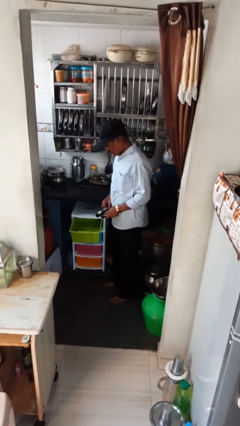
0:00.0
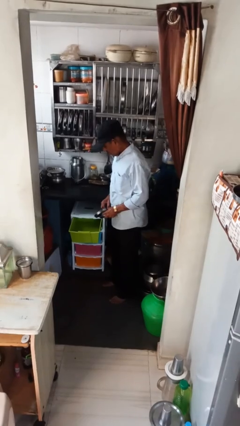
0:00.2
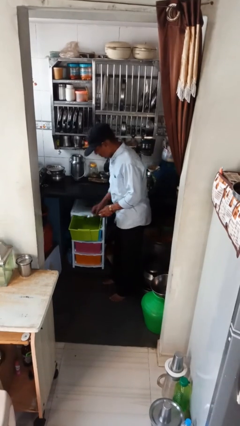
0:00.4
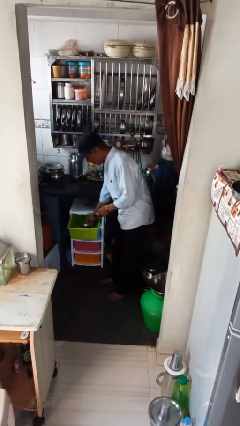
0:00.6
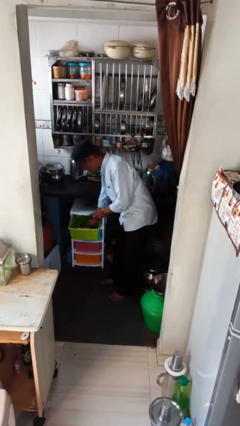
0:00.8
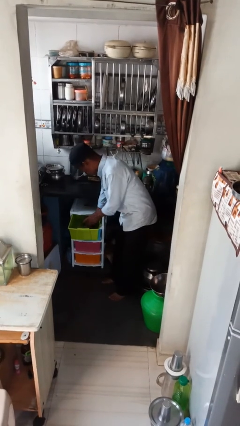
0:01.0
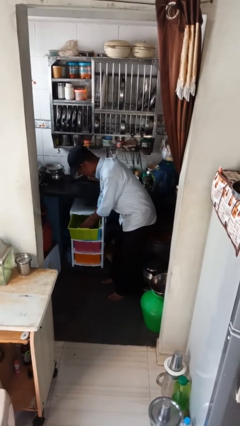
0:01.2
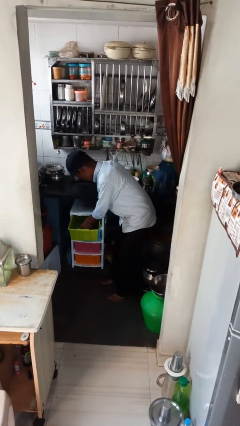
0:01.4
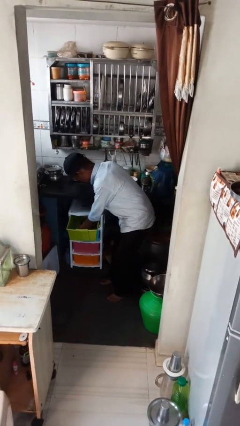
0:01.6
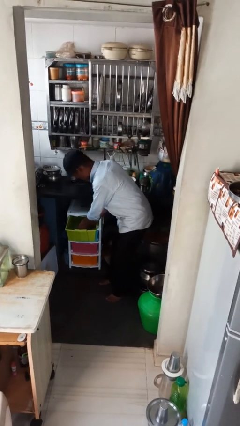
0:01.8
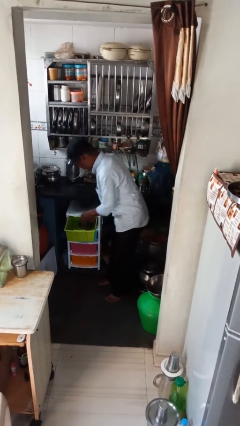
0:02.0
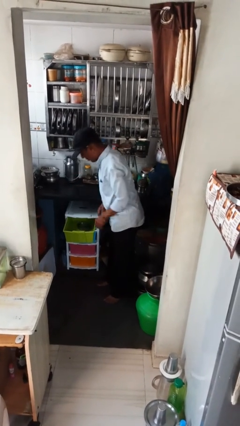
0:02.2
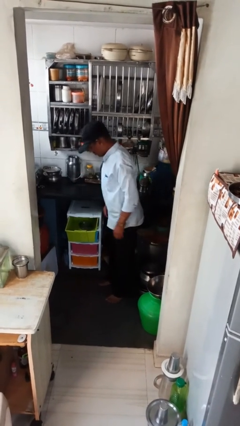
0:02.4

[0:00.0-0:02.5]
person puts object in cabinet

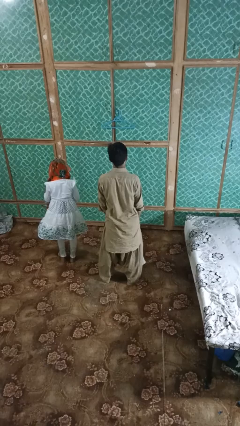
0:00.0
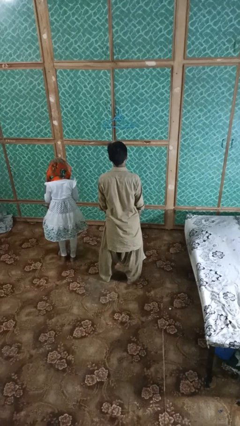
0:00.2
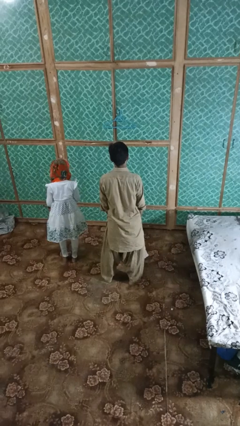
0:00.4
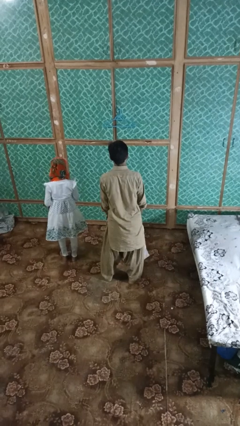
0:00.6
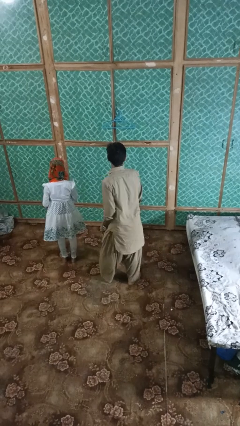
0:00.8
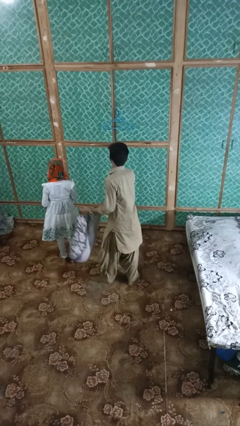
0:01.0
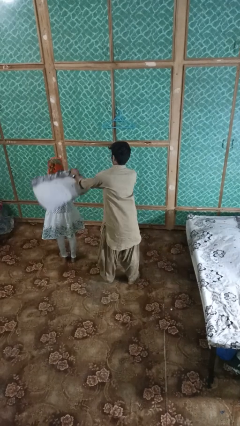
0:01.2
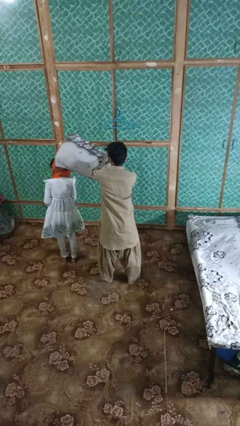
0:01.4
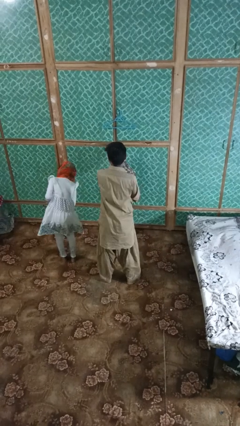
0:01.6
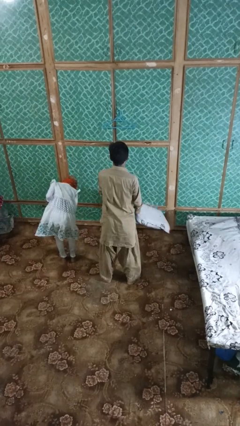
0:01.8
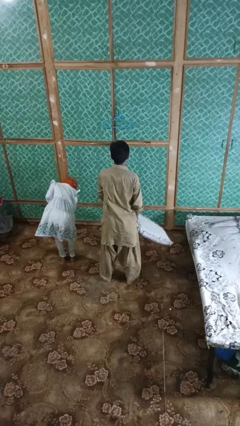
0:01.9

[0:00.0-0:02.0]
person hits person with pillow

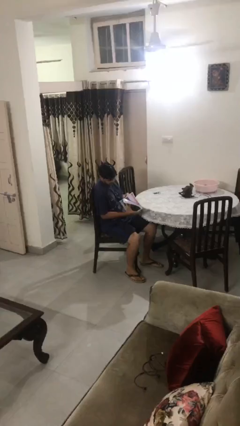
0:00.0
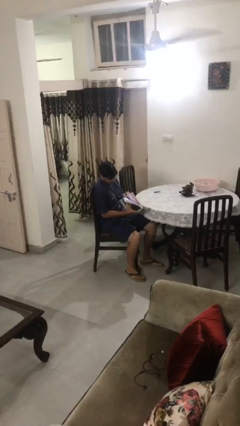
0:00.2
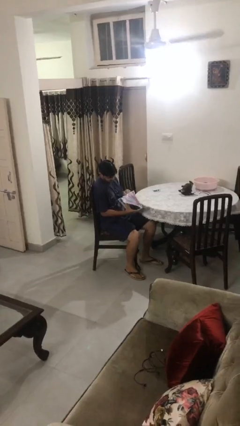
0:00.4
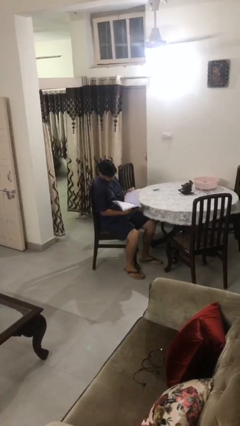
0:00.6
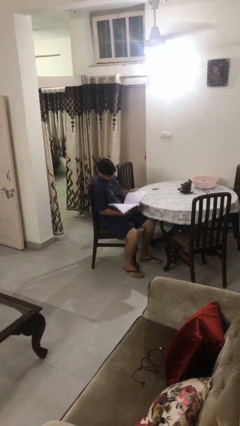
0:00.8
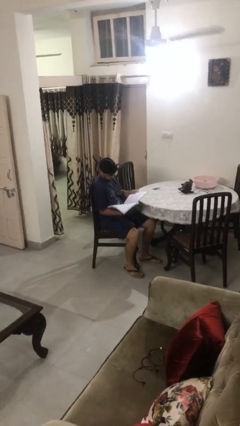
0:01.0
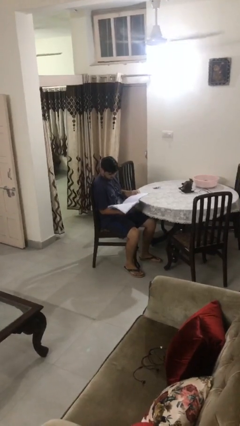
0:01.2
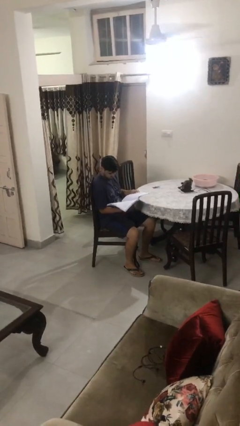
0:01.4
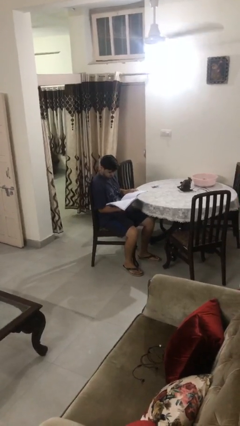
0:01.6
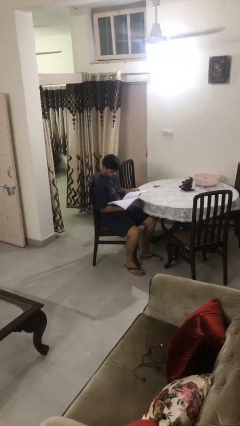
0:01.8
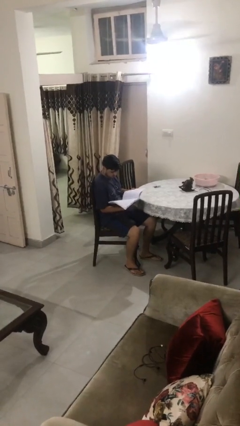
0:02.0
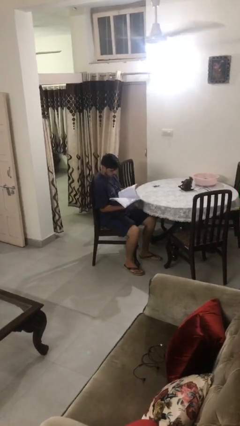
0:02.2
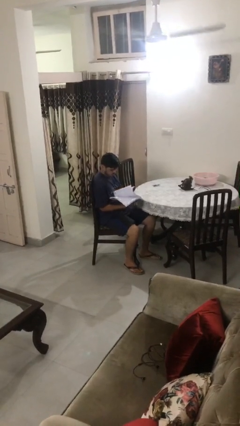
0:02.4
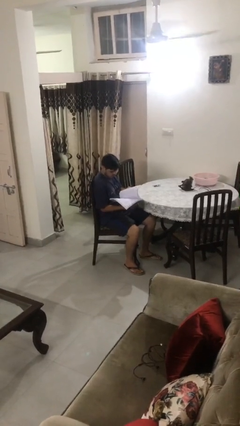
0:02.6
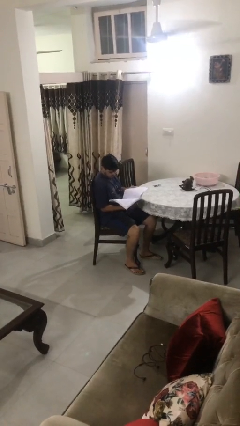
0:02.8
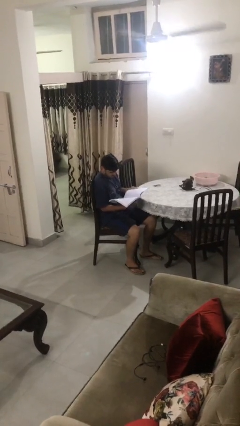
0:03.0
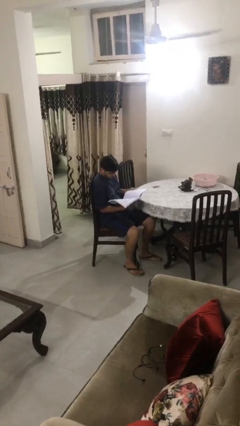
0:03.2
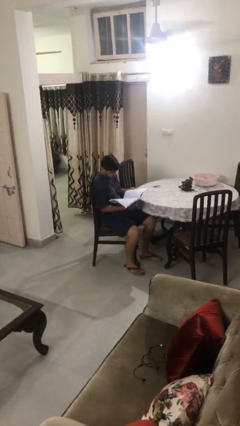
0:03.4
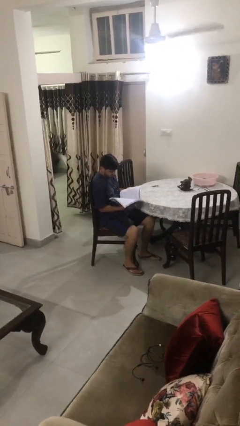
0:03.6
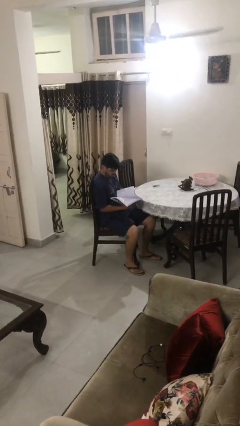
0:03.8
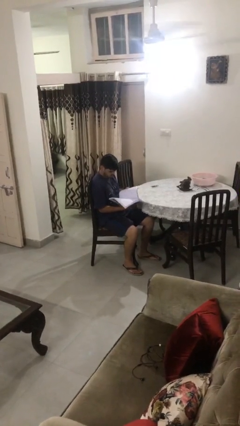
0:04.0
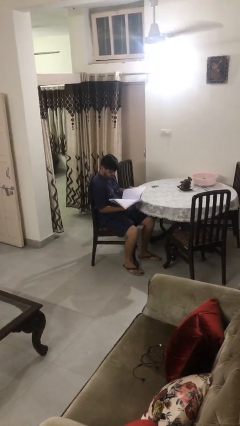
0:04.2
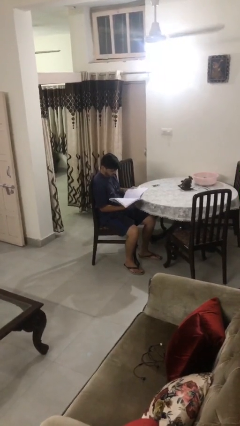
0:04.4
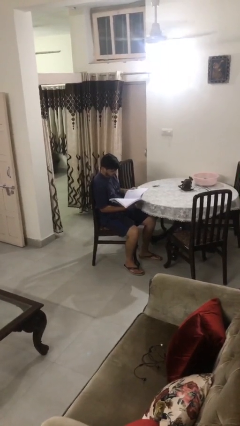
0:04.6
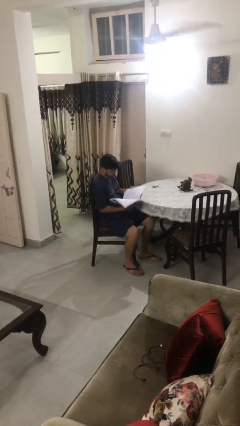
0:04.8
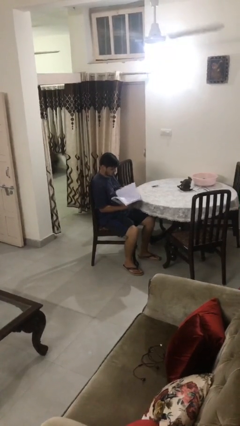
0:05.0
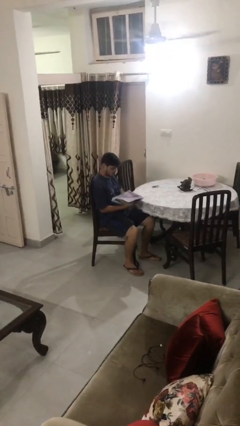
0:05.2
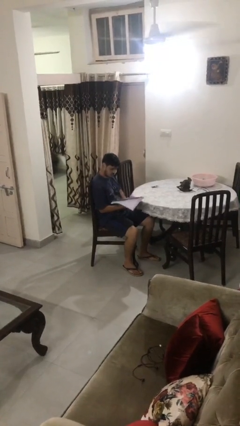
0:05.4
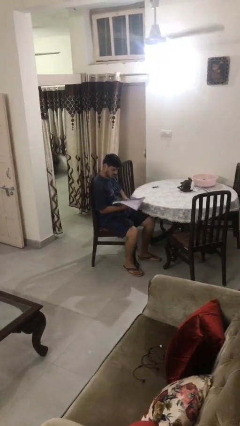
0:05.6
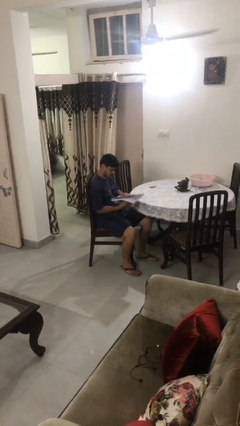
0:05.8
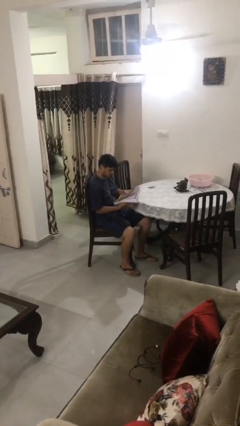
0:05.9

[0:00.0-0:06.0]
person reads document

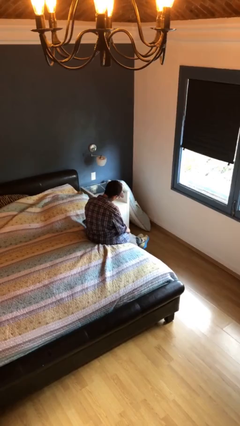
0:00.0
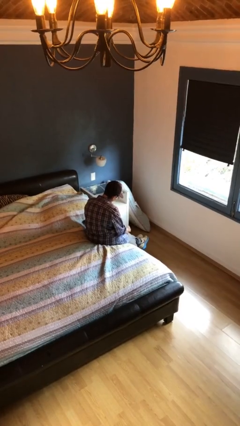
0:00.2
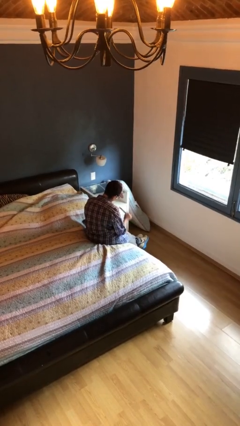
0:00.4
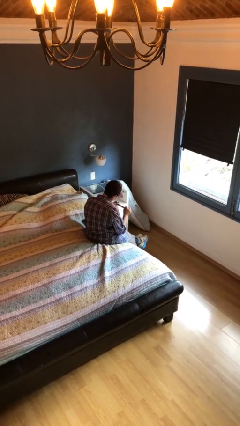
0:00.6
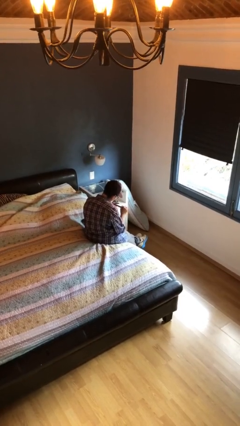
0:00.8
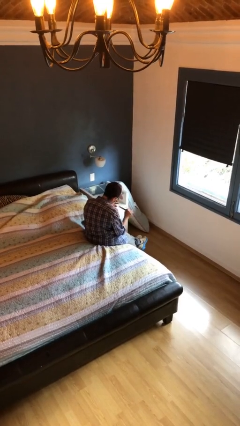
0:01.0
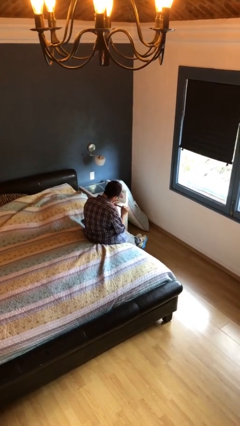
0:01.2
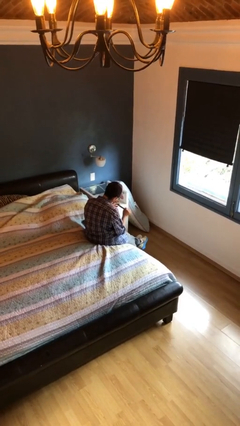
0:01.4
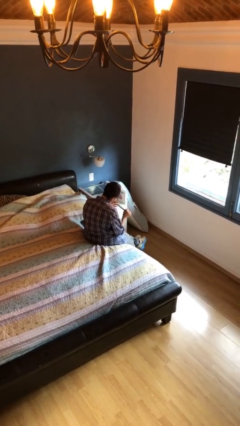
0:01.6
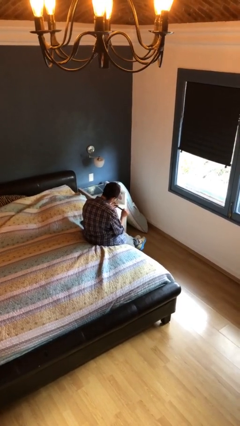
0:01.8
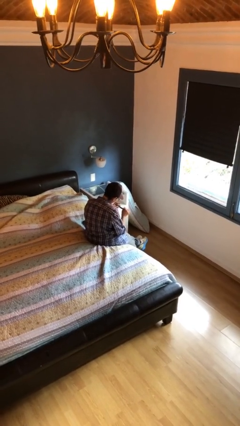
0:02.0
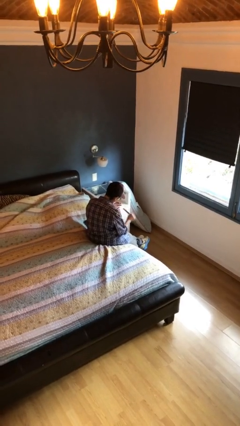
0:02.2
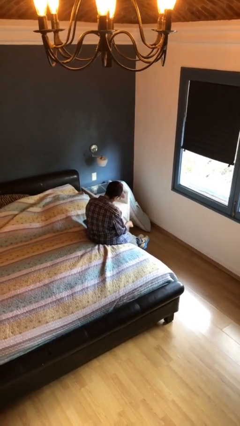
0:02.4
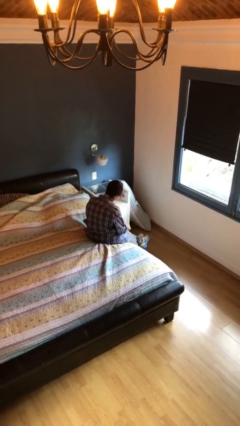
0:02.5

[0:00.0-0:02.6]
person files fingernails

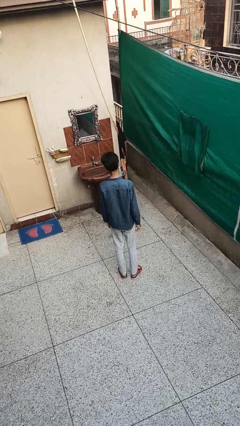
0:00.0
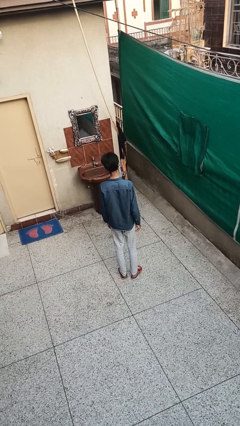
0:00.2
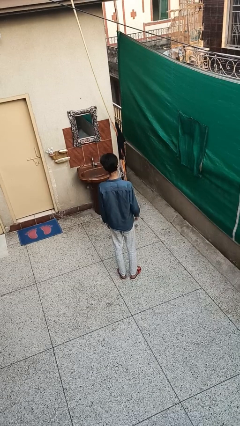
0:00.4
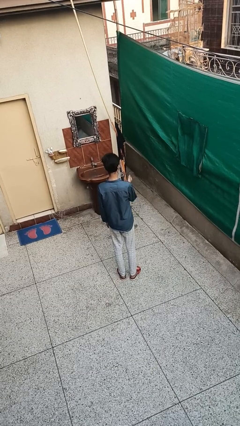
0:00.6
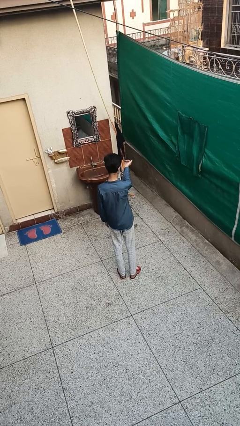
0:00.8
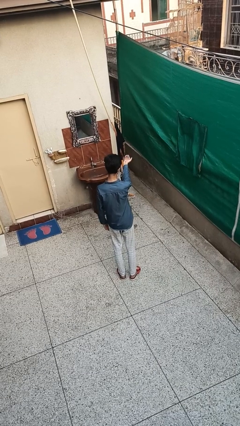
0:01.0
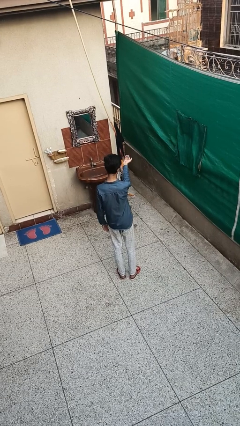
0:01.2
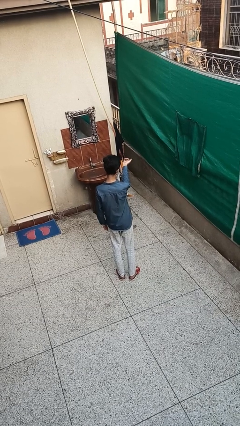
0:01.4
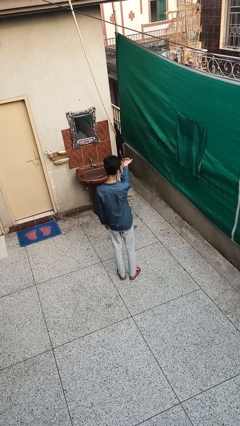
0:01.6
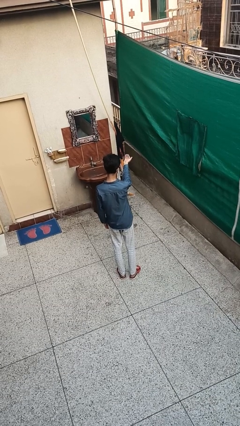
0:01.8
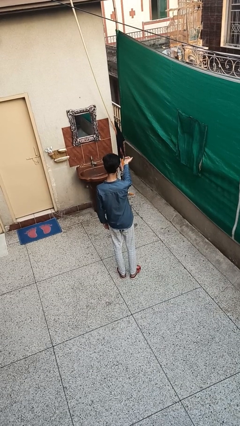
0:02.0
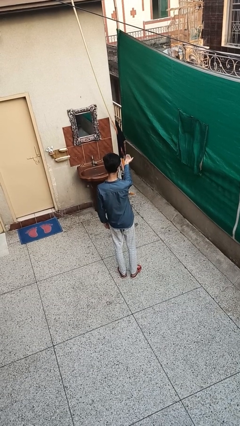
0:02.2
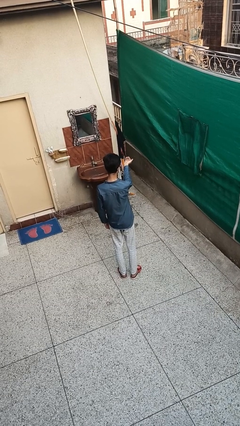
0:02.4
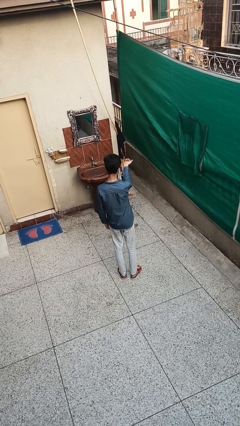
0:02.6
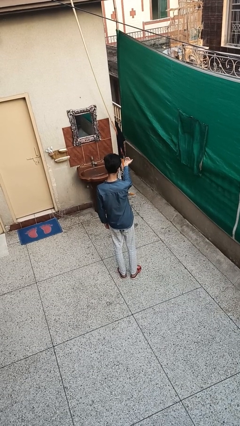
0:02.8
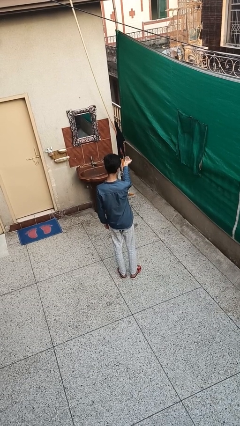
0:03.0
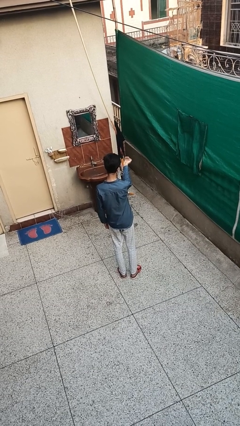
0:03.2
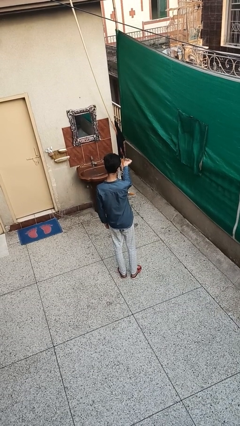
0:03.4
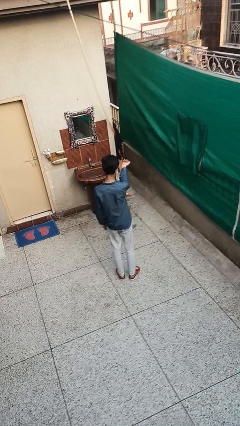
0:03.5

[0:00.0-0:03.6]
person gestures come here

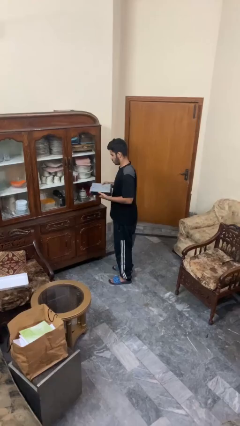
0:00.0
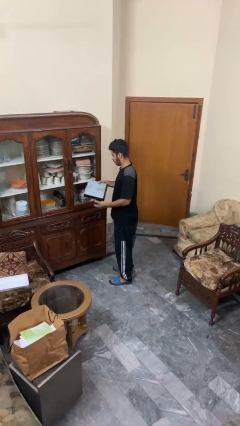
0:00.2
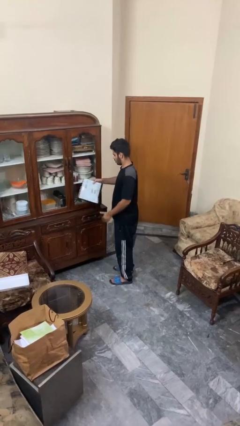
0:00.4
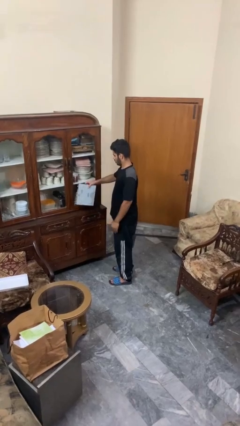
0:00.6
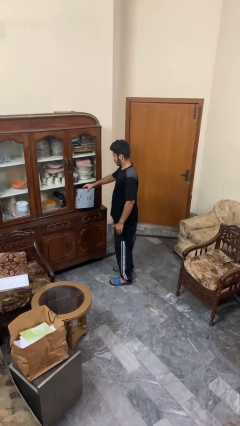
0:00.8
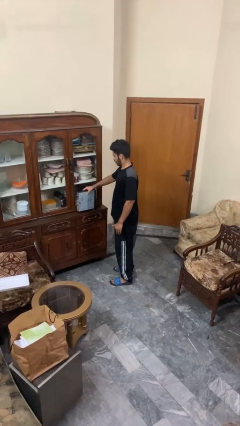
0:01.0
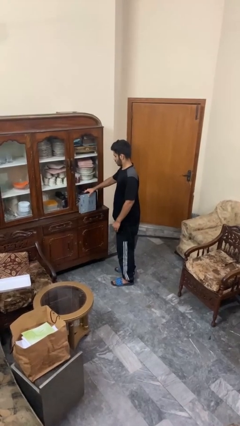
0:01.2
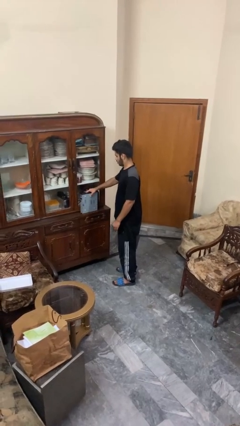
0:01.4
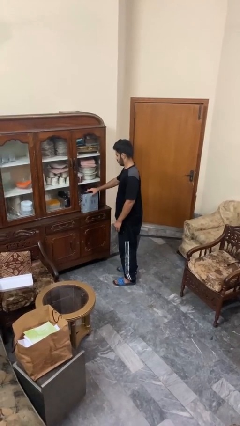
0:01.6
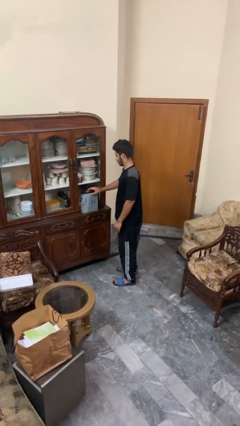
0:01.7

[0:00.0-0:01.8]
person puts down object on countertop
